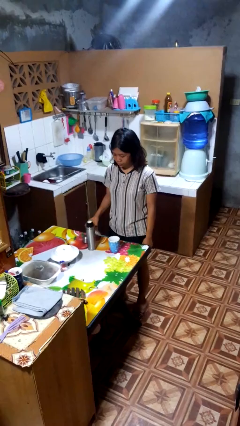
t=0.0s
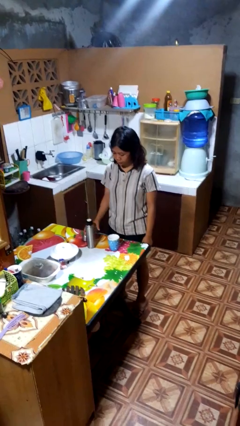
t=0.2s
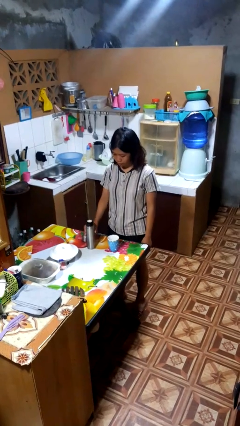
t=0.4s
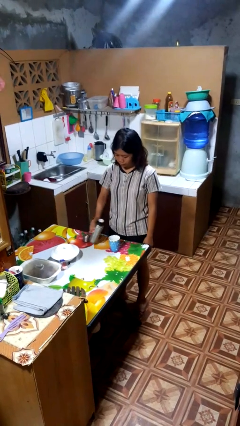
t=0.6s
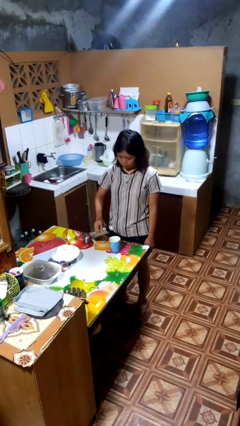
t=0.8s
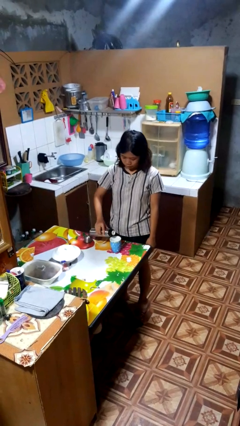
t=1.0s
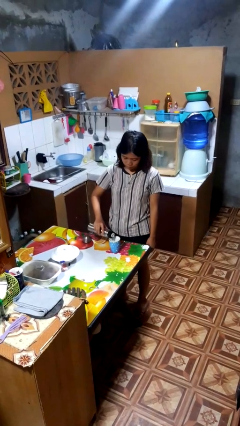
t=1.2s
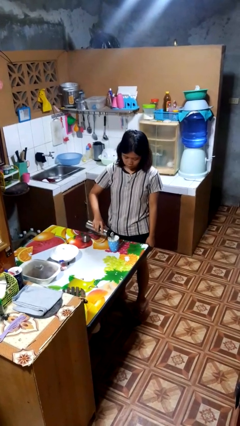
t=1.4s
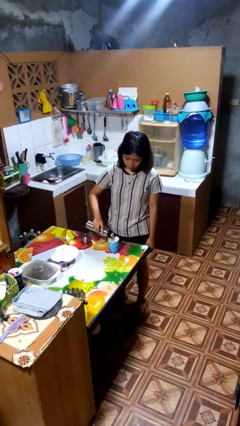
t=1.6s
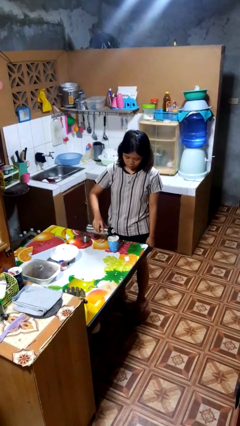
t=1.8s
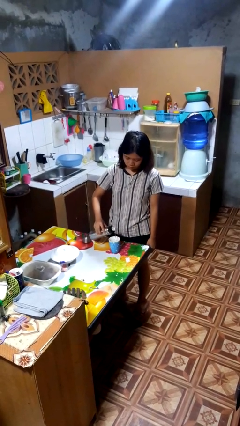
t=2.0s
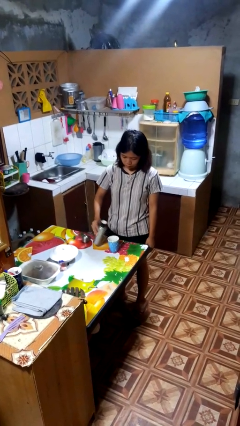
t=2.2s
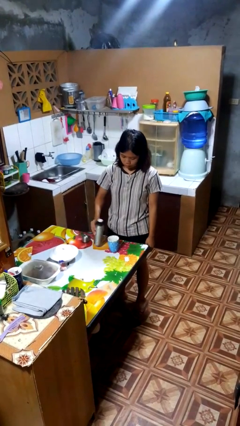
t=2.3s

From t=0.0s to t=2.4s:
person pours coffee into mug

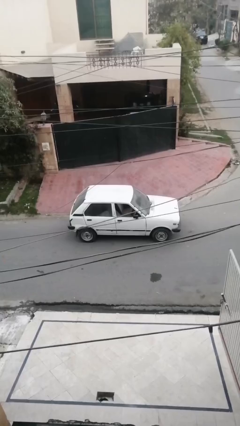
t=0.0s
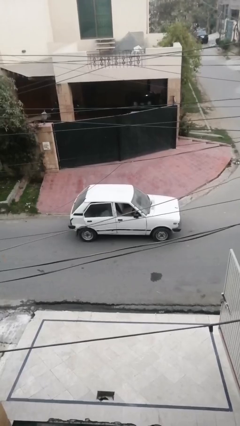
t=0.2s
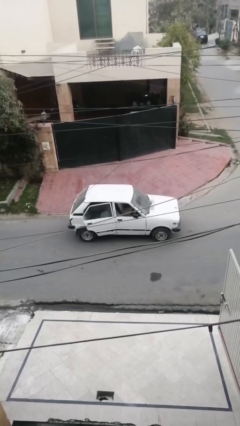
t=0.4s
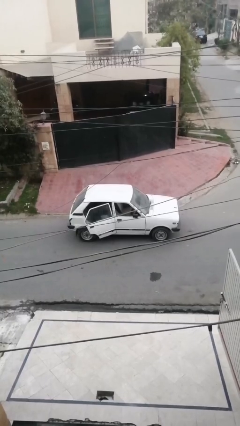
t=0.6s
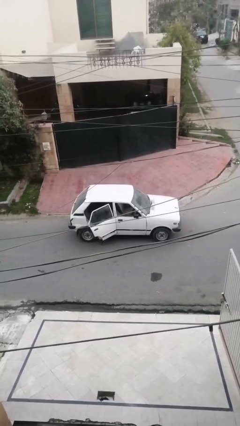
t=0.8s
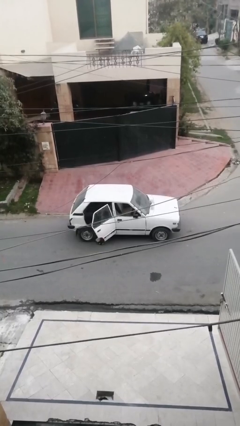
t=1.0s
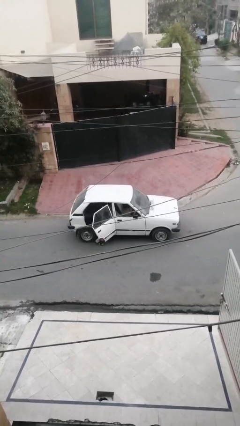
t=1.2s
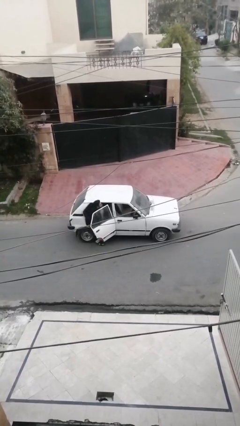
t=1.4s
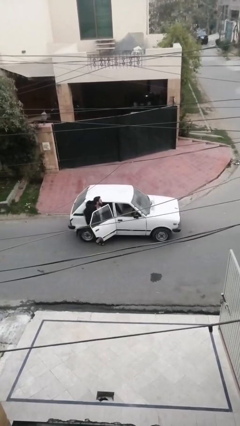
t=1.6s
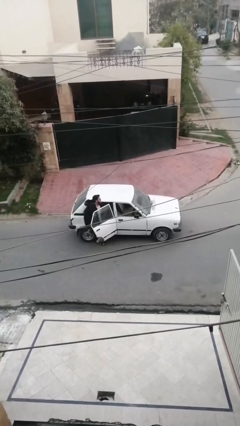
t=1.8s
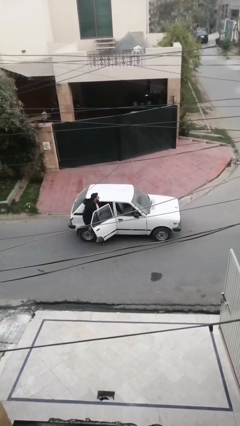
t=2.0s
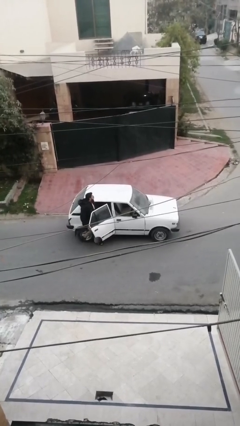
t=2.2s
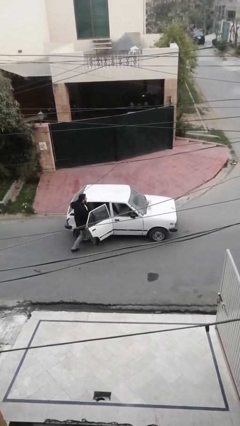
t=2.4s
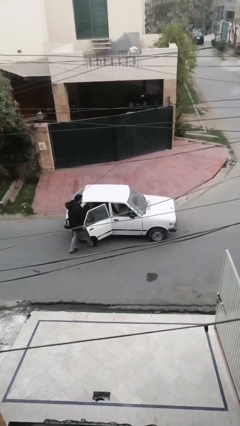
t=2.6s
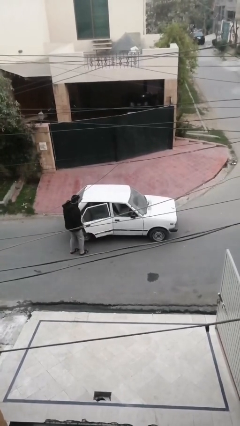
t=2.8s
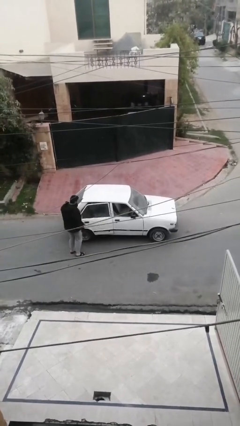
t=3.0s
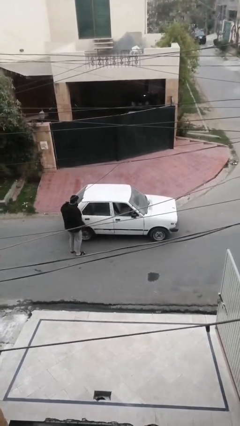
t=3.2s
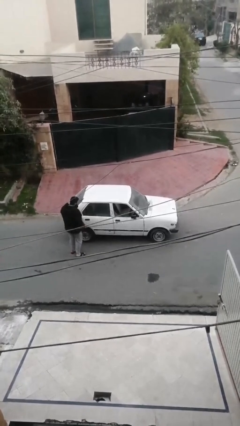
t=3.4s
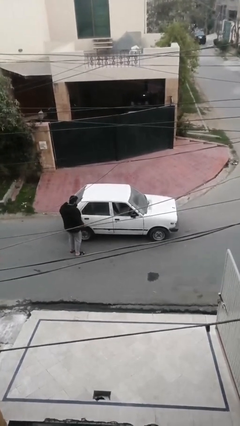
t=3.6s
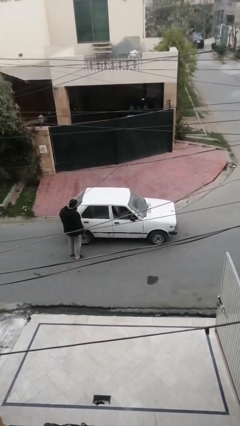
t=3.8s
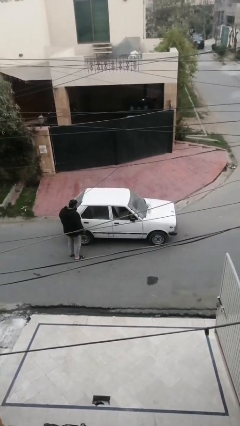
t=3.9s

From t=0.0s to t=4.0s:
car drops off person

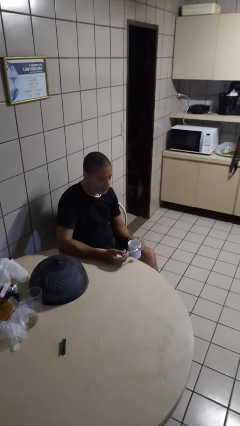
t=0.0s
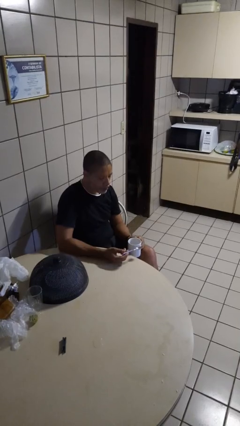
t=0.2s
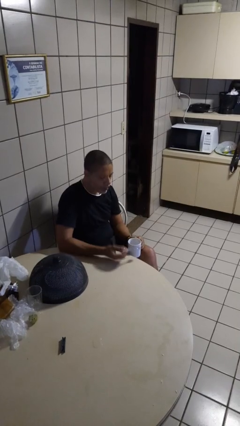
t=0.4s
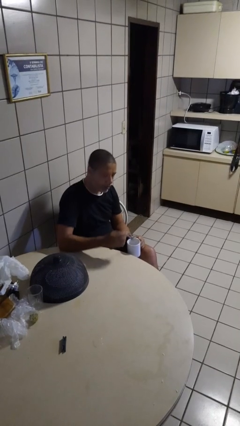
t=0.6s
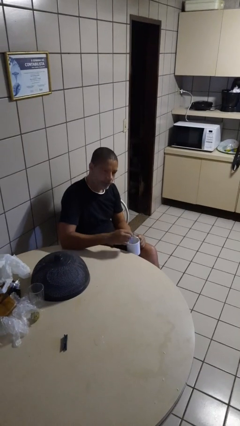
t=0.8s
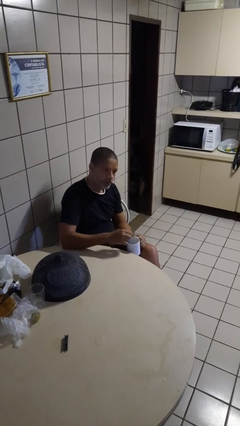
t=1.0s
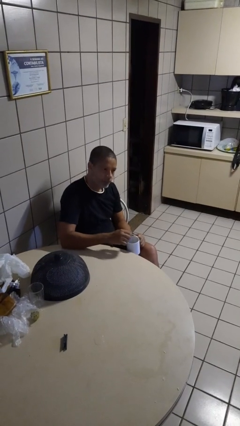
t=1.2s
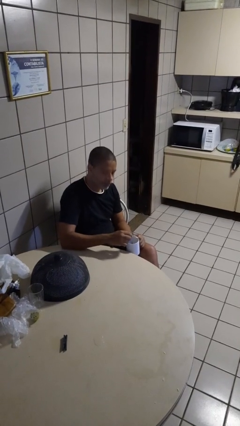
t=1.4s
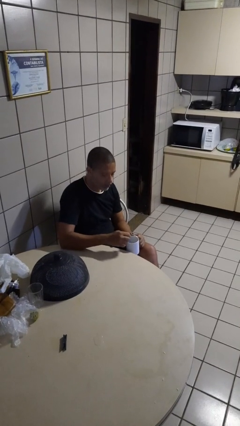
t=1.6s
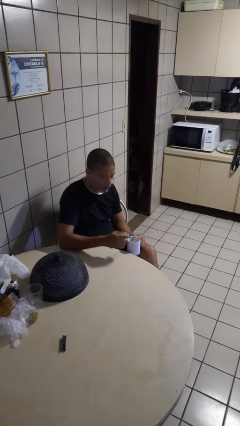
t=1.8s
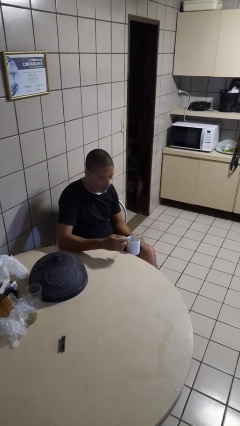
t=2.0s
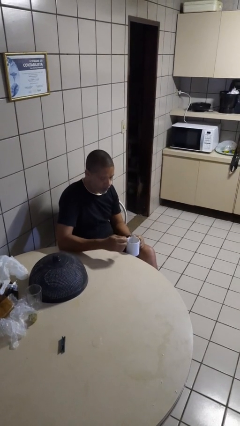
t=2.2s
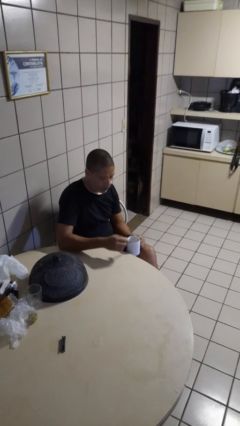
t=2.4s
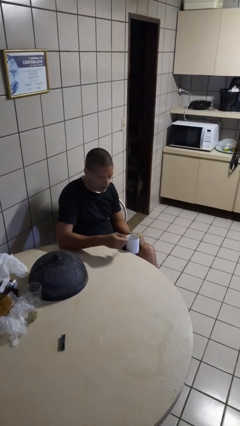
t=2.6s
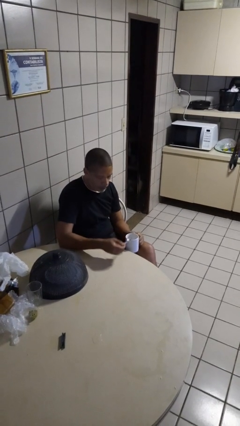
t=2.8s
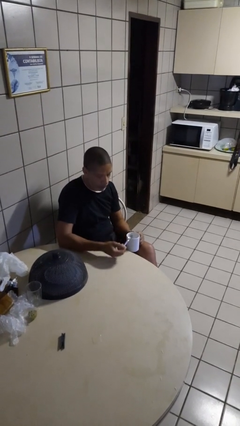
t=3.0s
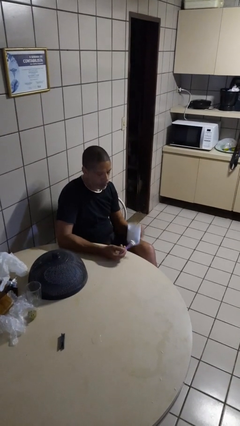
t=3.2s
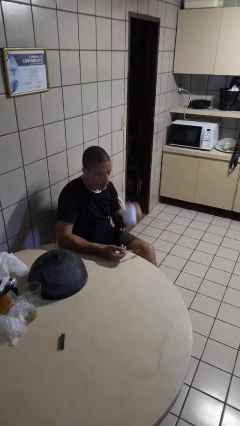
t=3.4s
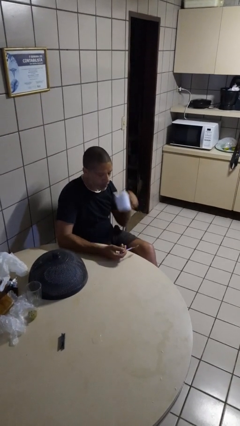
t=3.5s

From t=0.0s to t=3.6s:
person stirs mug

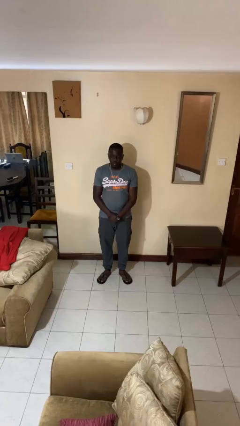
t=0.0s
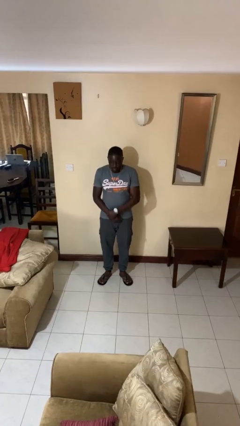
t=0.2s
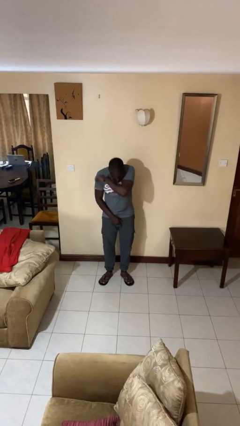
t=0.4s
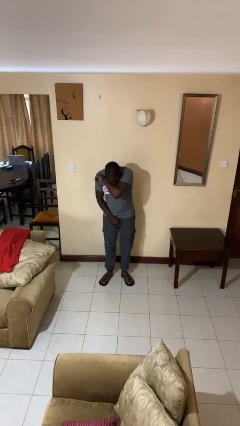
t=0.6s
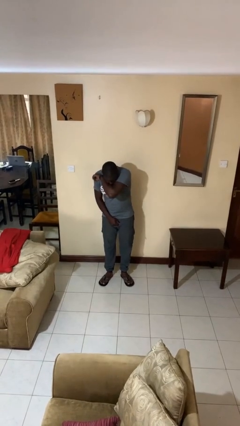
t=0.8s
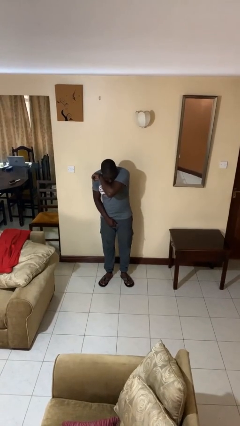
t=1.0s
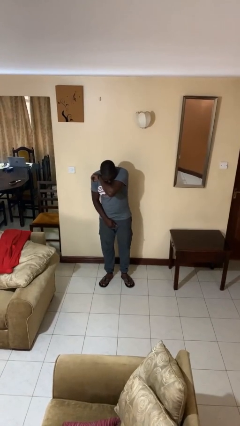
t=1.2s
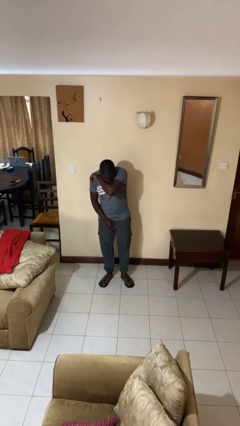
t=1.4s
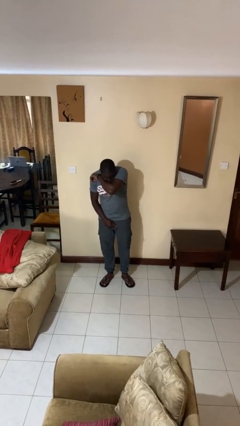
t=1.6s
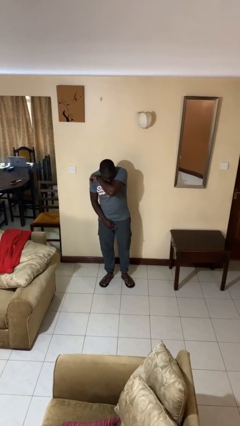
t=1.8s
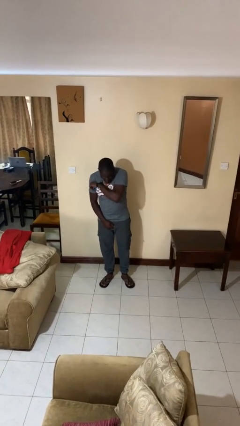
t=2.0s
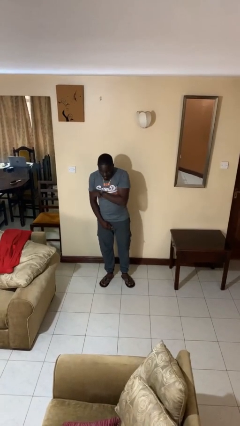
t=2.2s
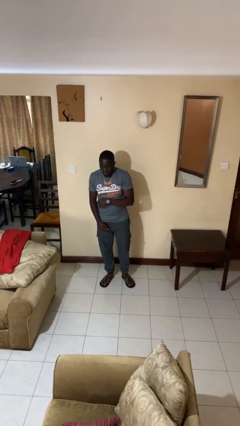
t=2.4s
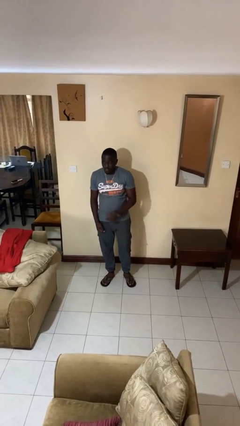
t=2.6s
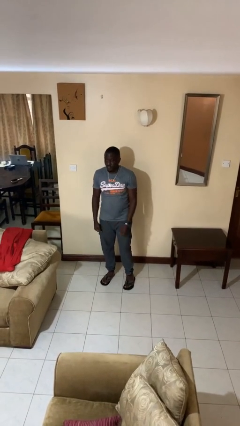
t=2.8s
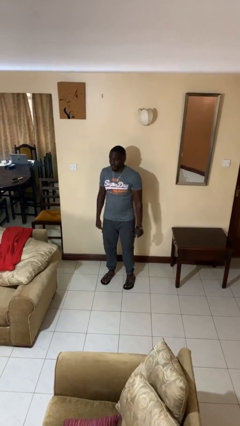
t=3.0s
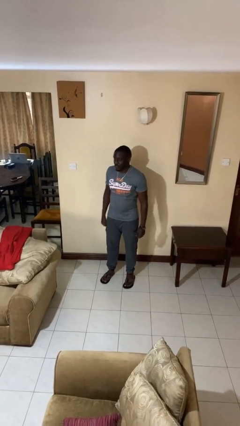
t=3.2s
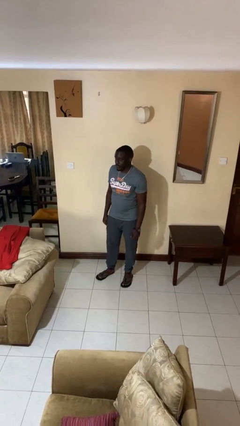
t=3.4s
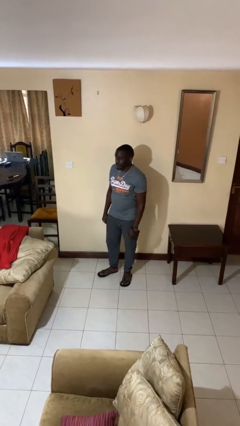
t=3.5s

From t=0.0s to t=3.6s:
person sneezes into arm

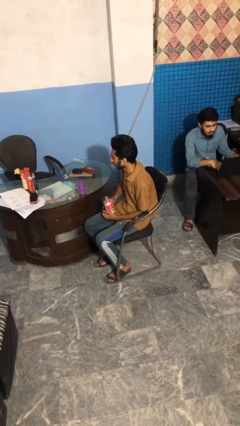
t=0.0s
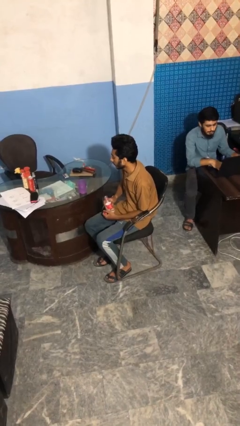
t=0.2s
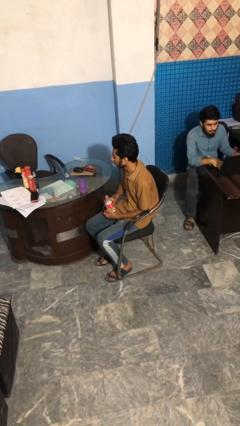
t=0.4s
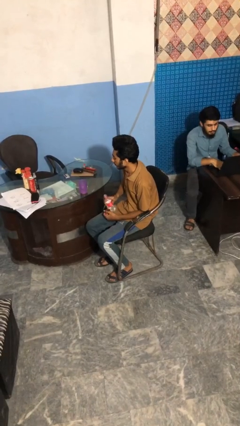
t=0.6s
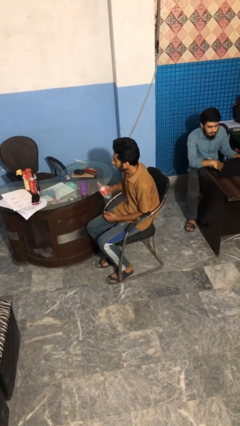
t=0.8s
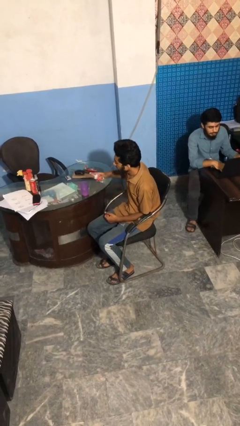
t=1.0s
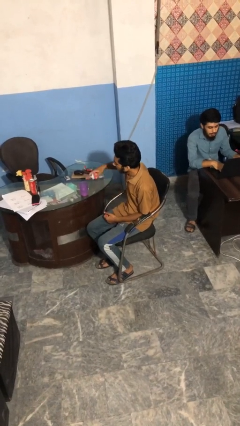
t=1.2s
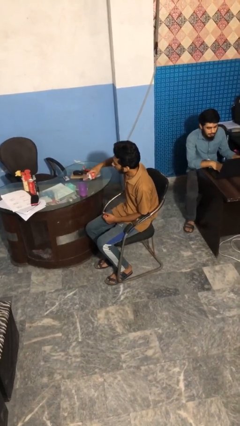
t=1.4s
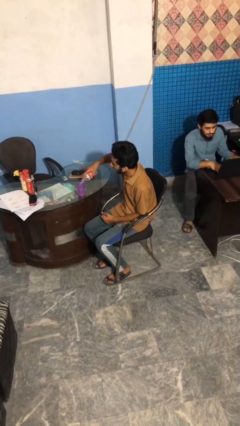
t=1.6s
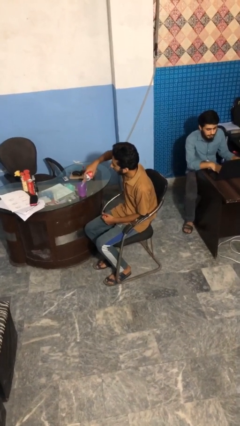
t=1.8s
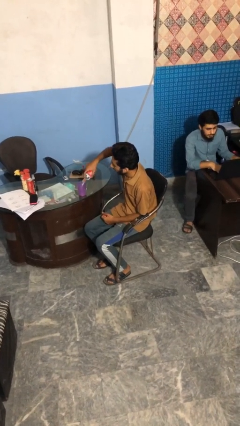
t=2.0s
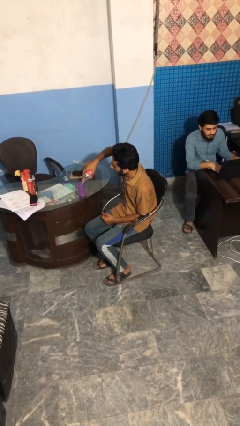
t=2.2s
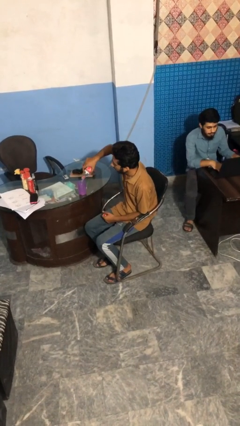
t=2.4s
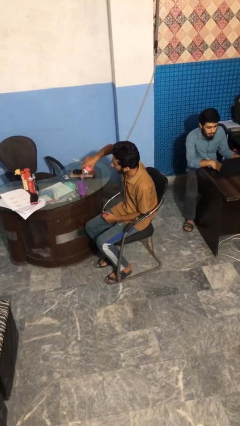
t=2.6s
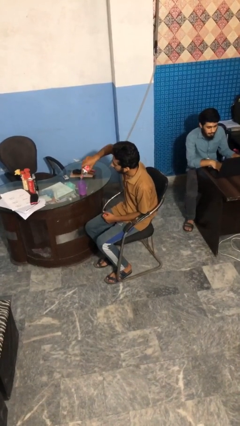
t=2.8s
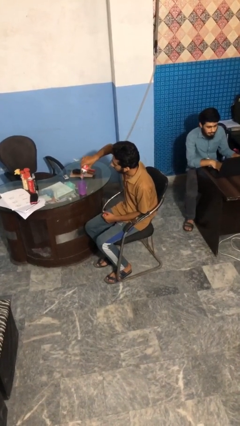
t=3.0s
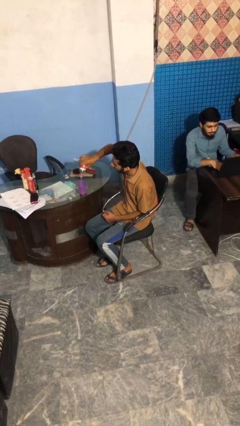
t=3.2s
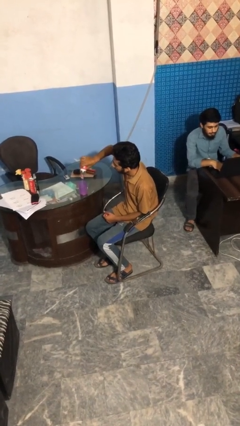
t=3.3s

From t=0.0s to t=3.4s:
person pours liquid into cup

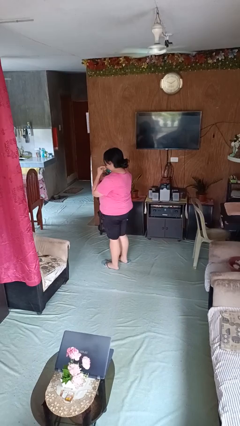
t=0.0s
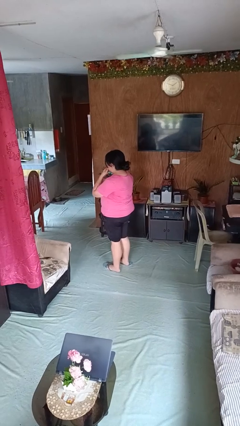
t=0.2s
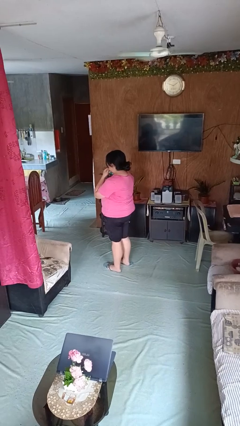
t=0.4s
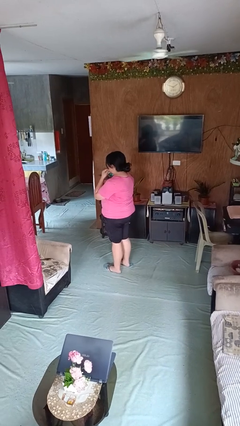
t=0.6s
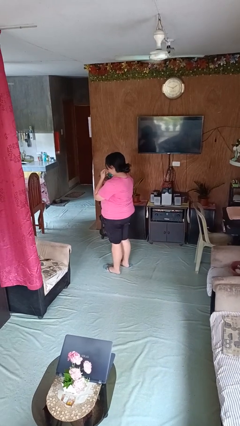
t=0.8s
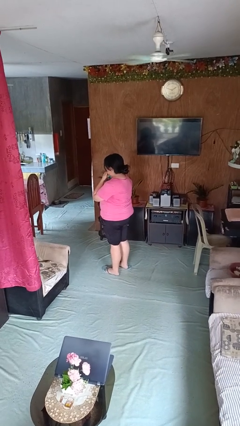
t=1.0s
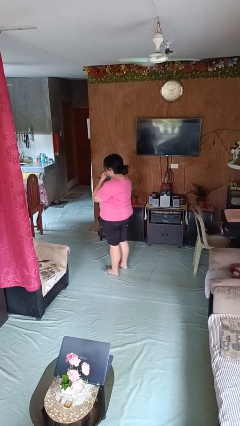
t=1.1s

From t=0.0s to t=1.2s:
person strokes chin
